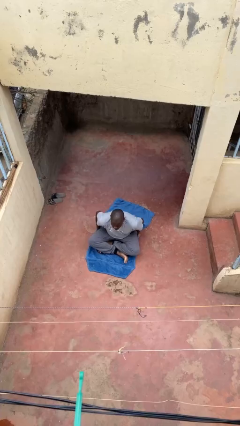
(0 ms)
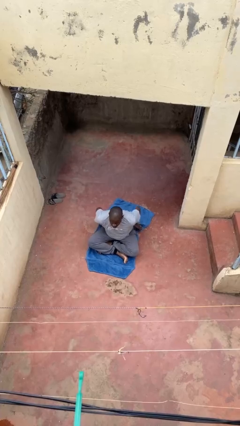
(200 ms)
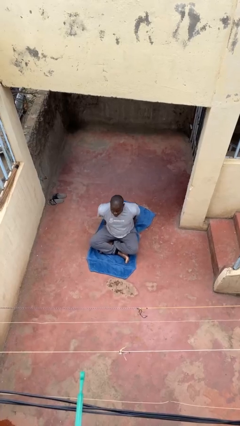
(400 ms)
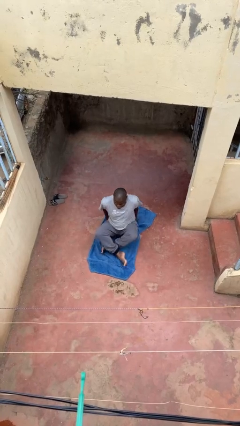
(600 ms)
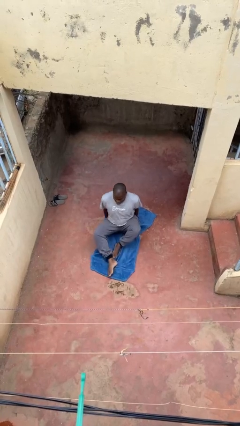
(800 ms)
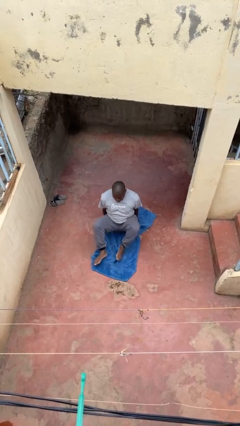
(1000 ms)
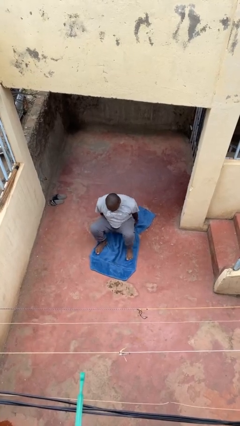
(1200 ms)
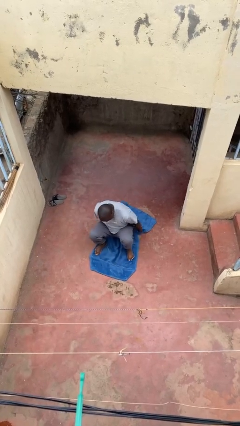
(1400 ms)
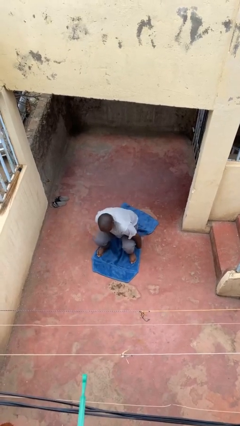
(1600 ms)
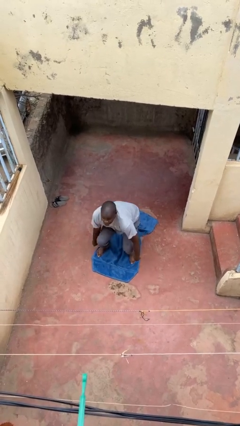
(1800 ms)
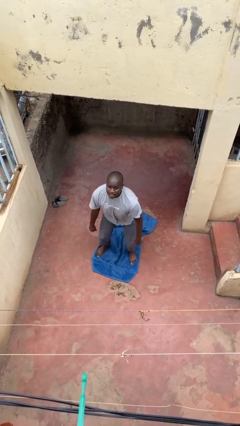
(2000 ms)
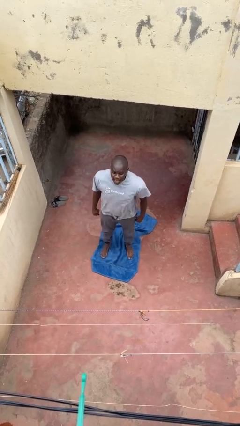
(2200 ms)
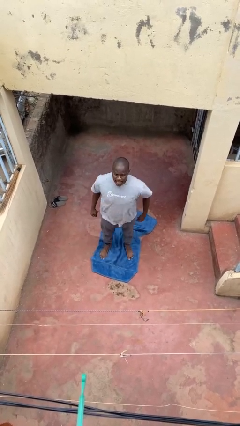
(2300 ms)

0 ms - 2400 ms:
person stands up from floor

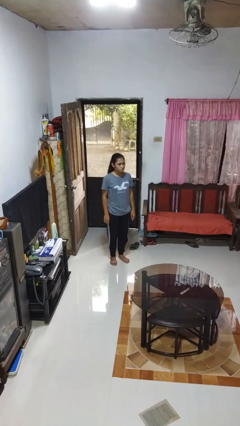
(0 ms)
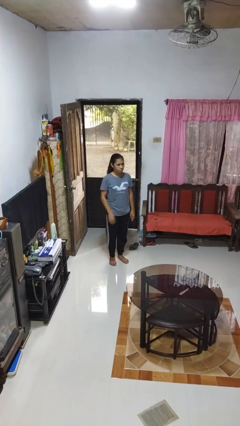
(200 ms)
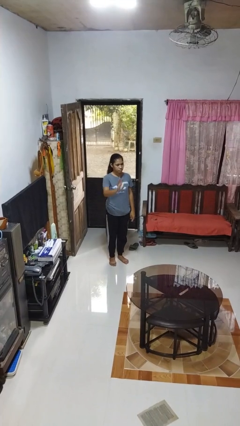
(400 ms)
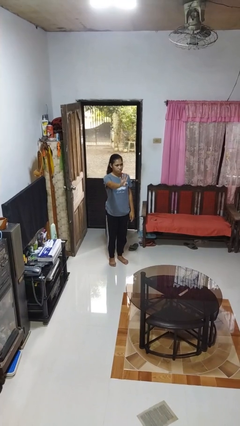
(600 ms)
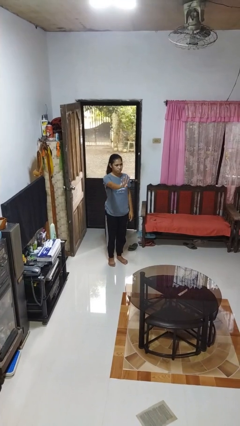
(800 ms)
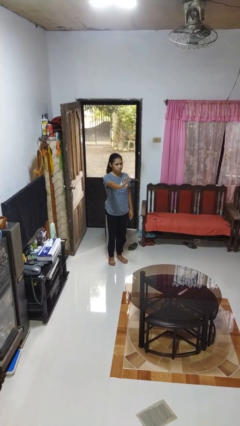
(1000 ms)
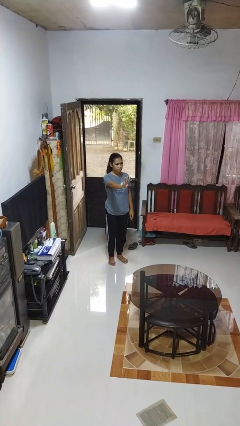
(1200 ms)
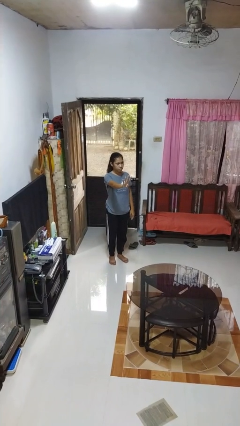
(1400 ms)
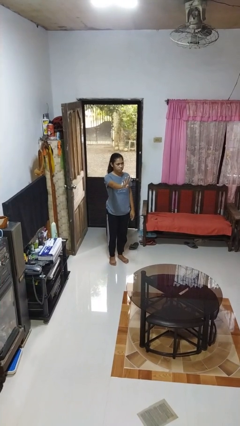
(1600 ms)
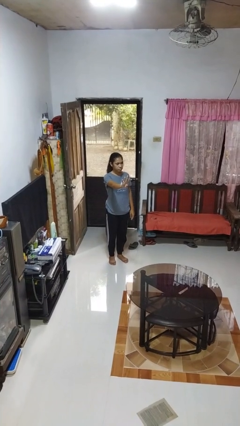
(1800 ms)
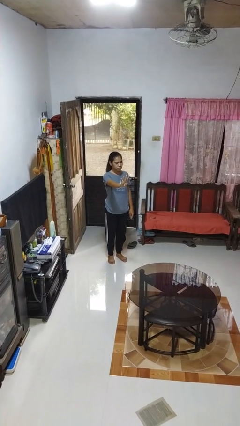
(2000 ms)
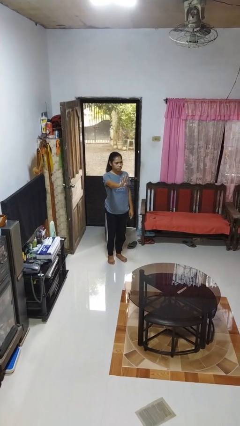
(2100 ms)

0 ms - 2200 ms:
person gestures number four

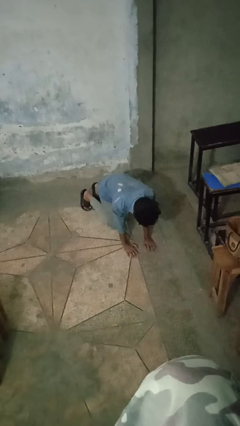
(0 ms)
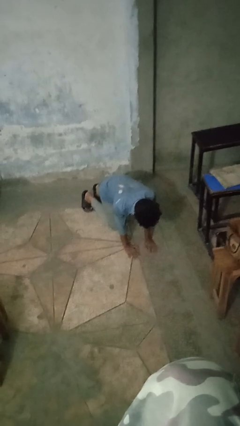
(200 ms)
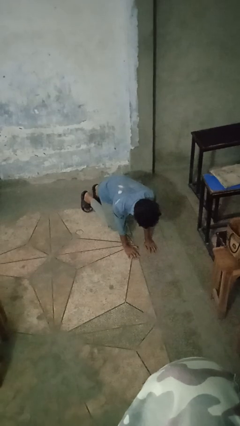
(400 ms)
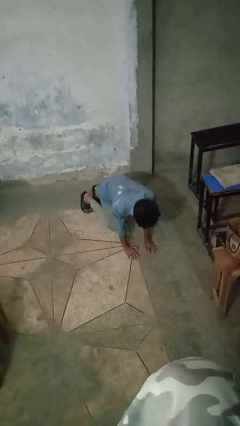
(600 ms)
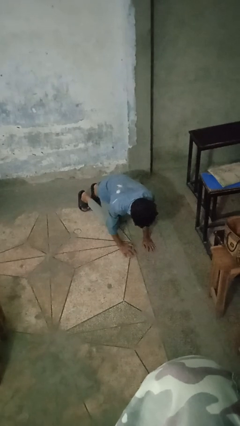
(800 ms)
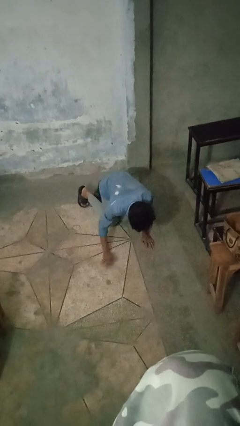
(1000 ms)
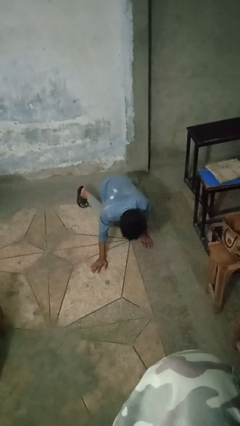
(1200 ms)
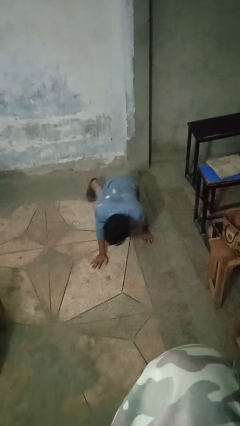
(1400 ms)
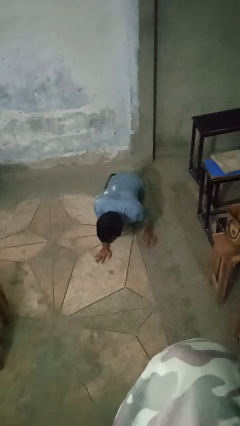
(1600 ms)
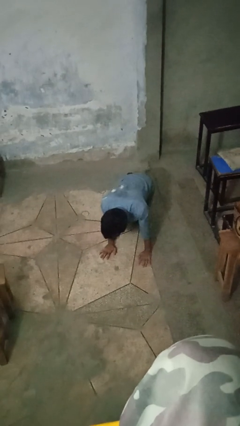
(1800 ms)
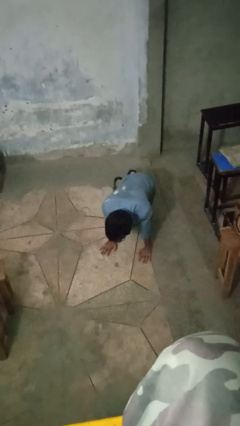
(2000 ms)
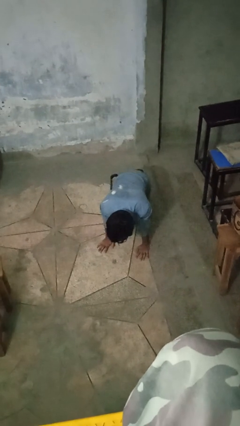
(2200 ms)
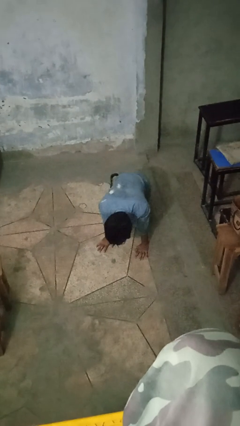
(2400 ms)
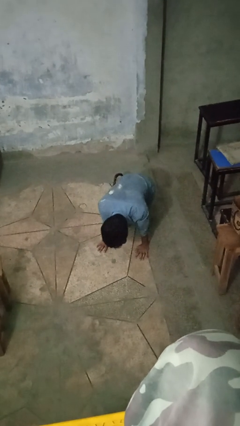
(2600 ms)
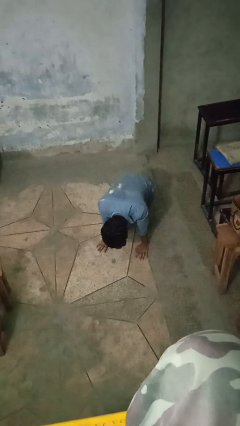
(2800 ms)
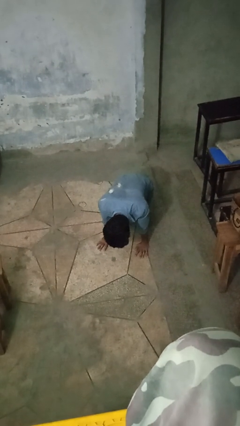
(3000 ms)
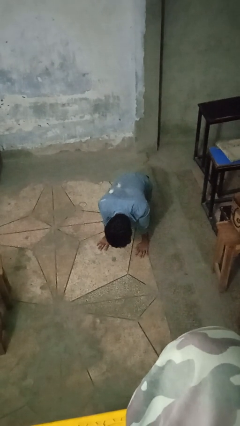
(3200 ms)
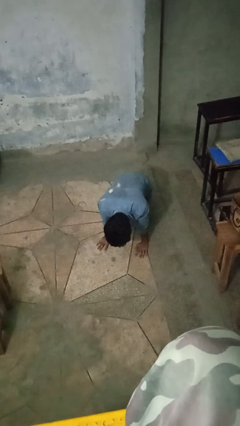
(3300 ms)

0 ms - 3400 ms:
person crawls

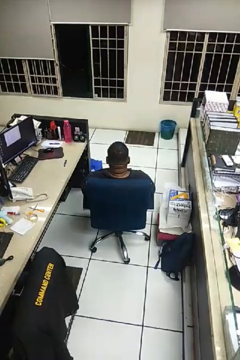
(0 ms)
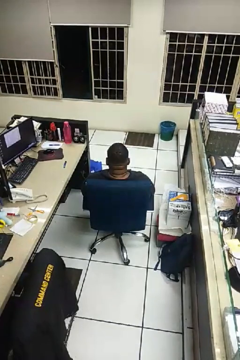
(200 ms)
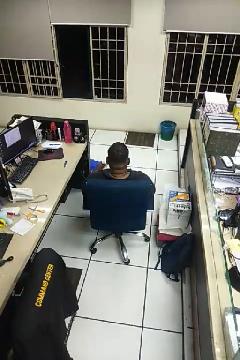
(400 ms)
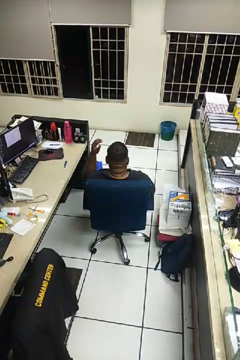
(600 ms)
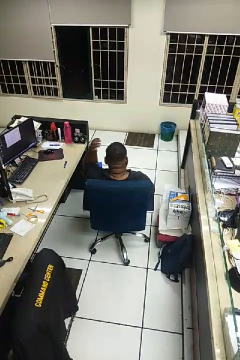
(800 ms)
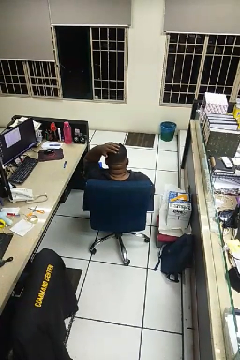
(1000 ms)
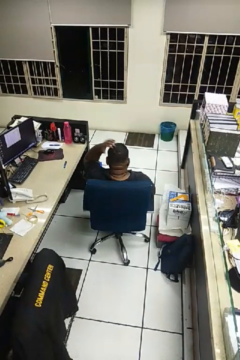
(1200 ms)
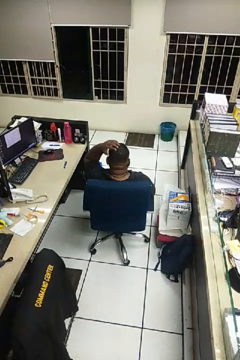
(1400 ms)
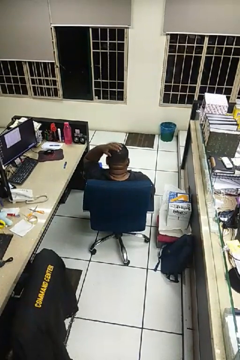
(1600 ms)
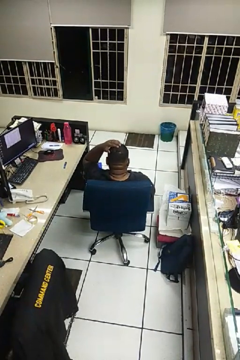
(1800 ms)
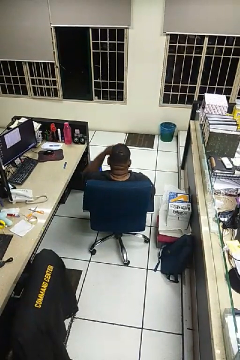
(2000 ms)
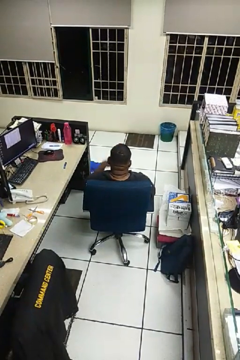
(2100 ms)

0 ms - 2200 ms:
person pats head

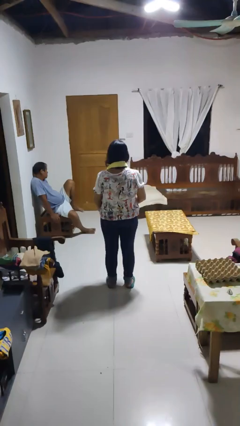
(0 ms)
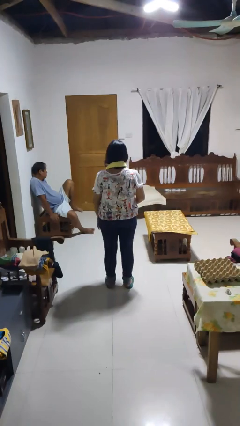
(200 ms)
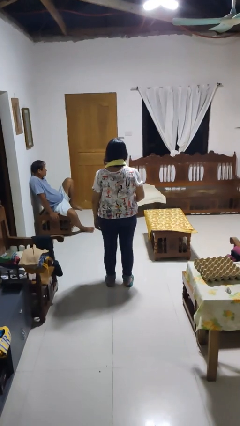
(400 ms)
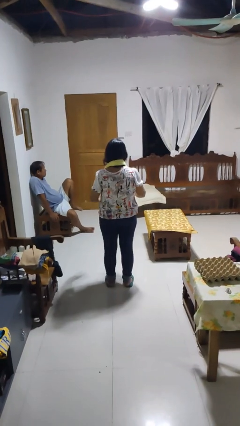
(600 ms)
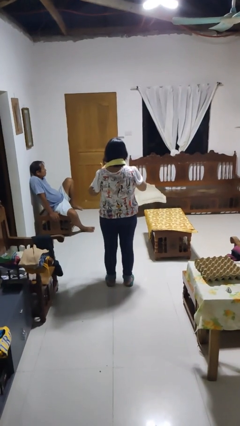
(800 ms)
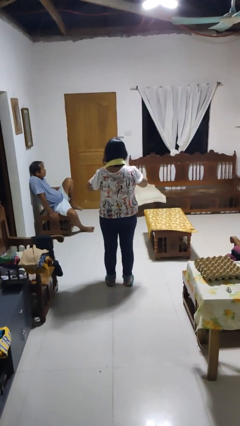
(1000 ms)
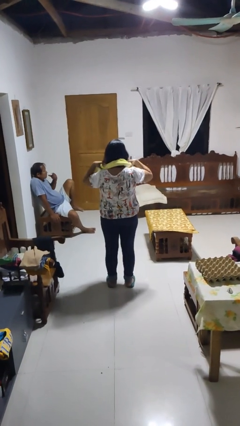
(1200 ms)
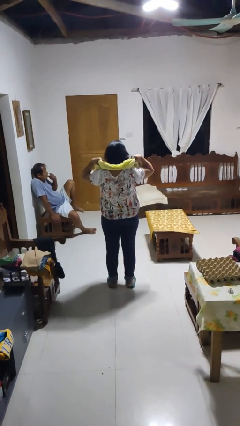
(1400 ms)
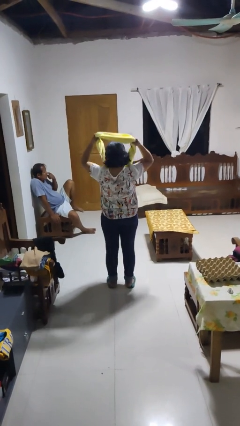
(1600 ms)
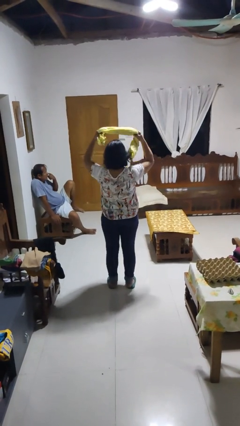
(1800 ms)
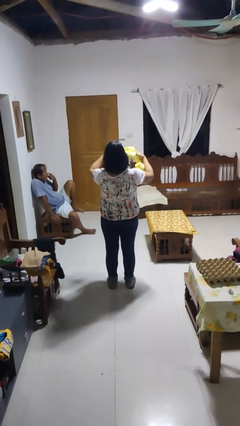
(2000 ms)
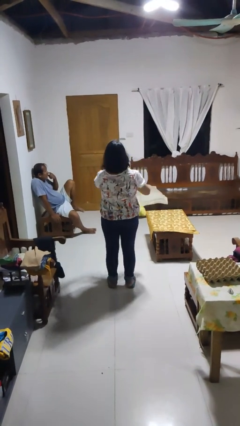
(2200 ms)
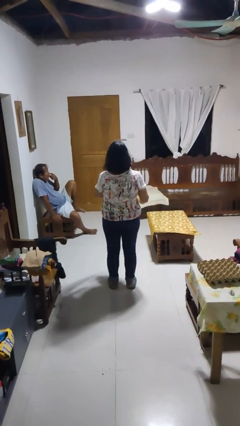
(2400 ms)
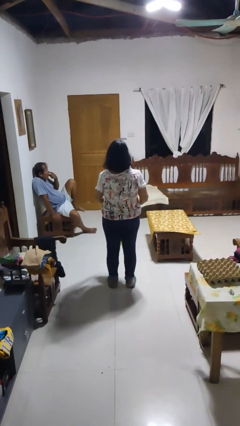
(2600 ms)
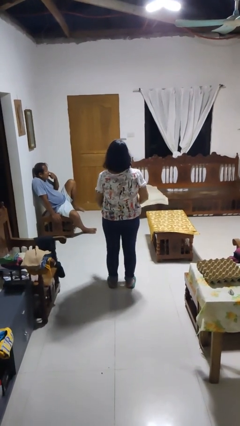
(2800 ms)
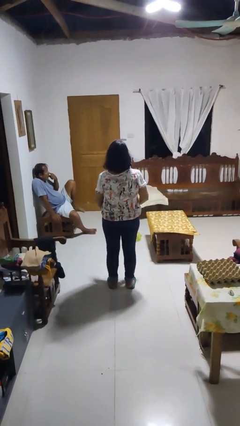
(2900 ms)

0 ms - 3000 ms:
person takes off scarf

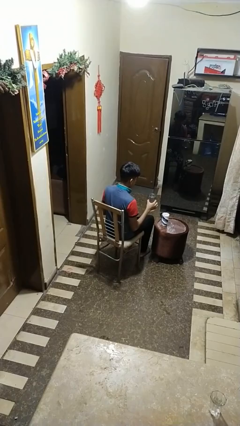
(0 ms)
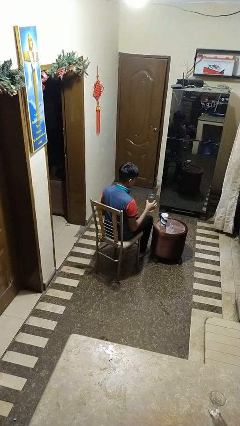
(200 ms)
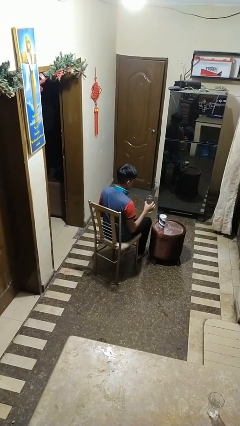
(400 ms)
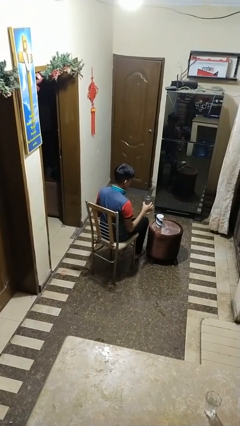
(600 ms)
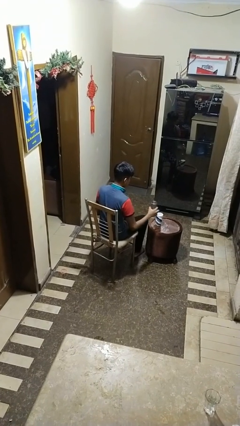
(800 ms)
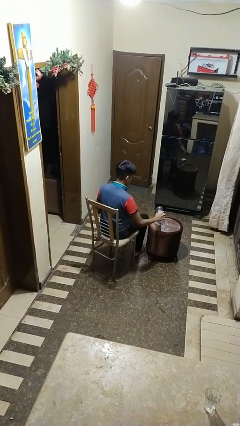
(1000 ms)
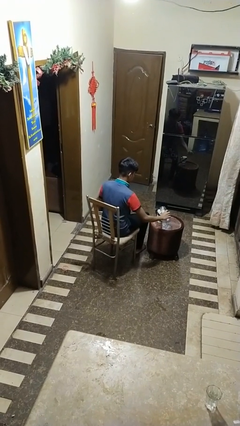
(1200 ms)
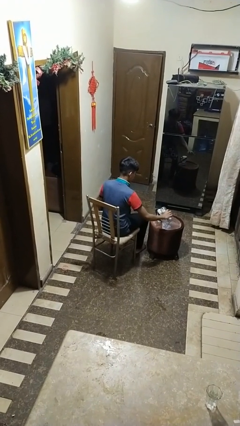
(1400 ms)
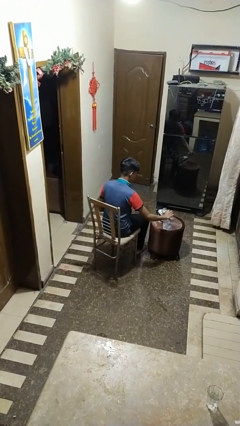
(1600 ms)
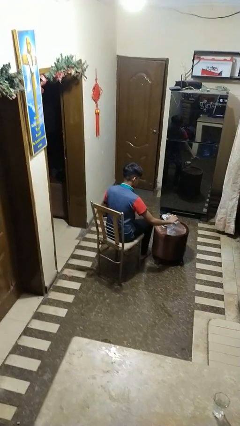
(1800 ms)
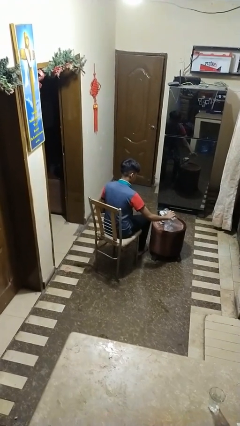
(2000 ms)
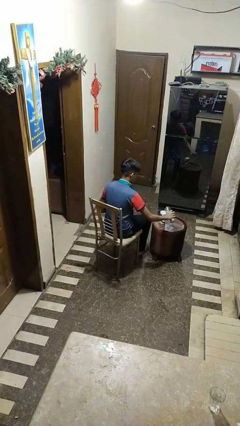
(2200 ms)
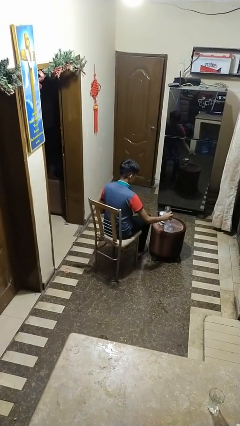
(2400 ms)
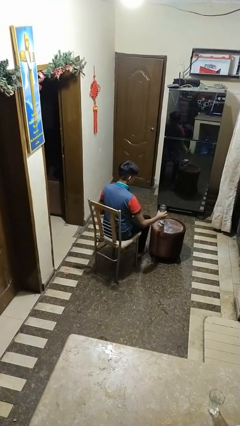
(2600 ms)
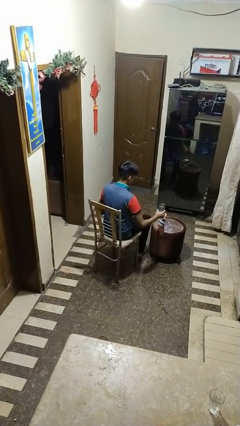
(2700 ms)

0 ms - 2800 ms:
person pours liquid into cup

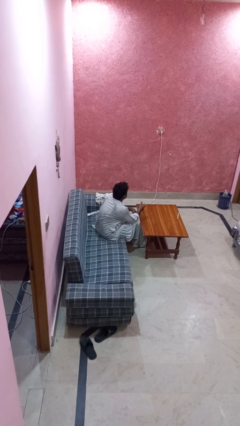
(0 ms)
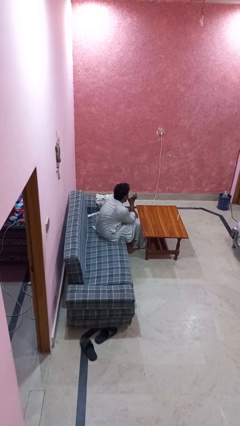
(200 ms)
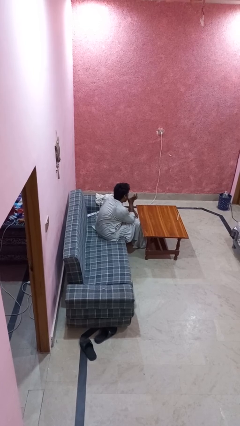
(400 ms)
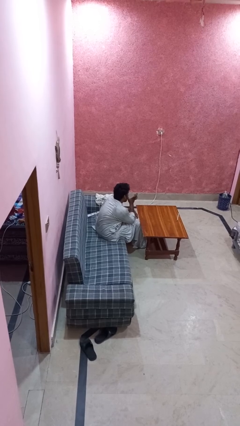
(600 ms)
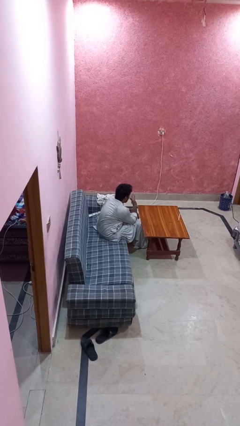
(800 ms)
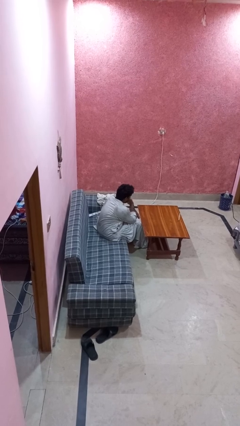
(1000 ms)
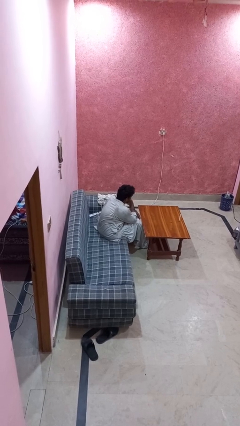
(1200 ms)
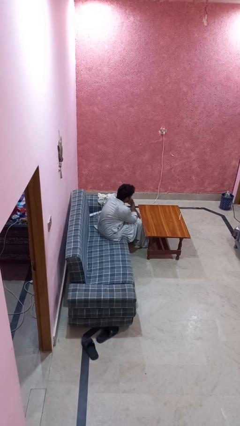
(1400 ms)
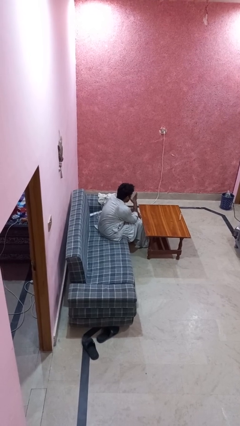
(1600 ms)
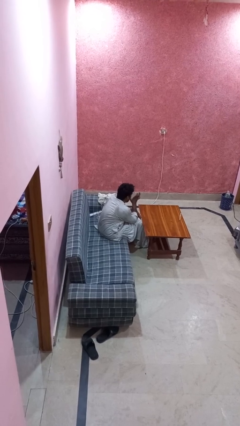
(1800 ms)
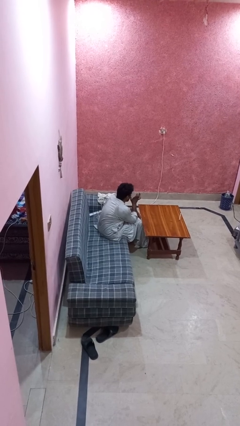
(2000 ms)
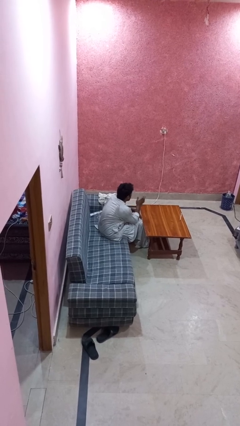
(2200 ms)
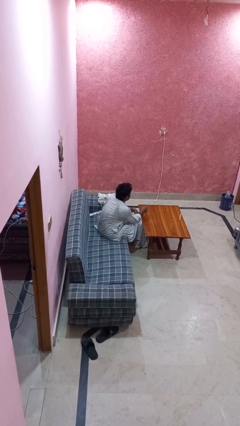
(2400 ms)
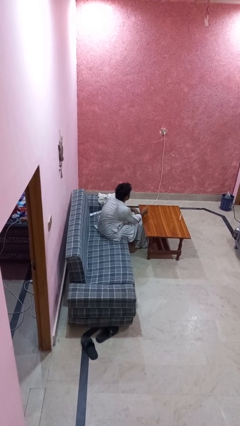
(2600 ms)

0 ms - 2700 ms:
person licks fingers
